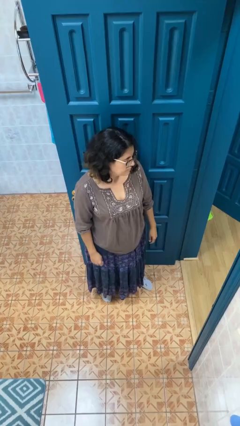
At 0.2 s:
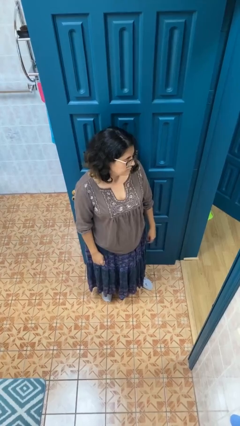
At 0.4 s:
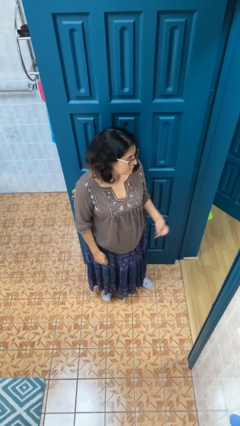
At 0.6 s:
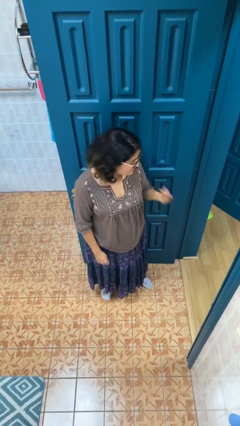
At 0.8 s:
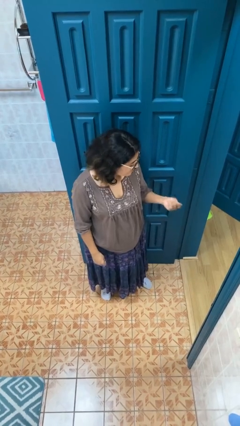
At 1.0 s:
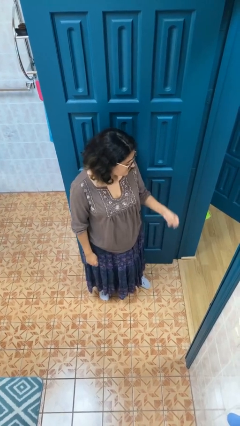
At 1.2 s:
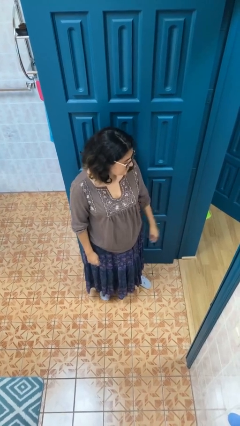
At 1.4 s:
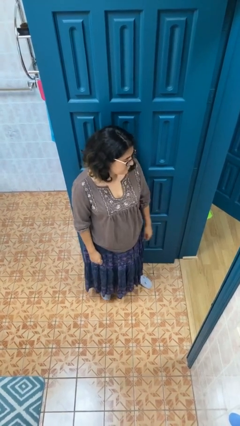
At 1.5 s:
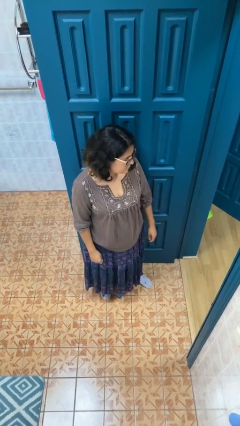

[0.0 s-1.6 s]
person snaps fingers

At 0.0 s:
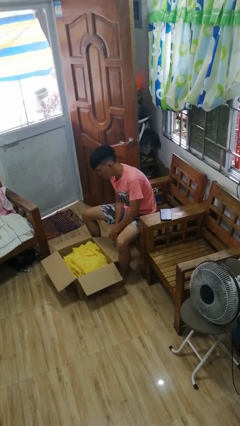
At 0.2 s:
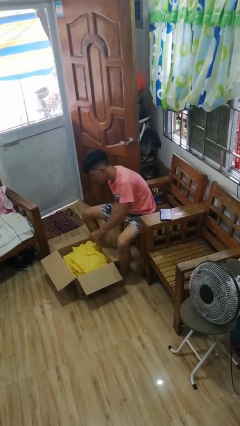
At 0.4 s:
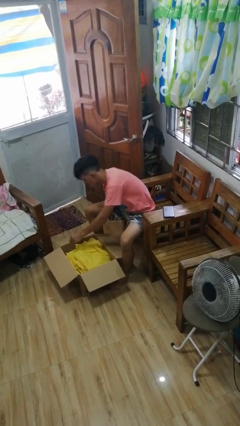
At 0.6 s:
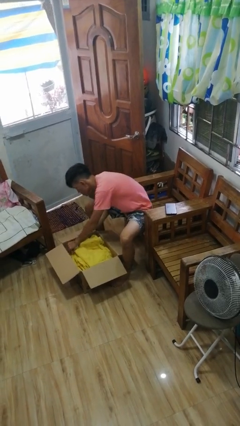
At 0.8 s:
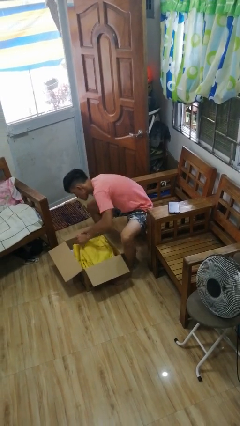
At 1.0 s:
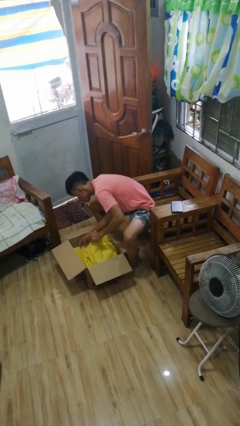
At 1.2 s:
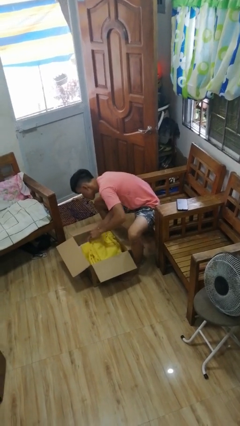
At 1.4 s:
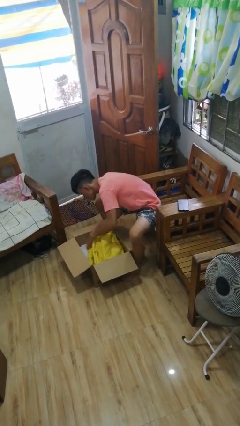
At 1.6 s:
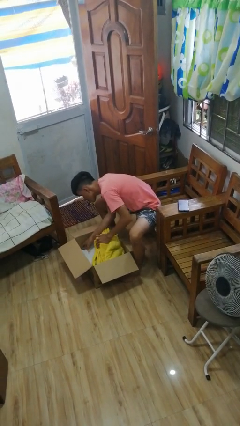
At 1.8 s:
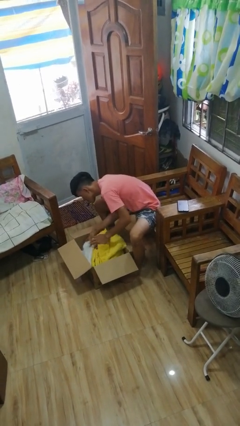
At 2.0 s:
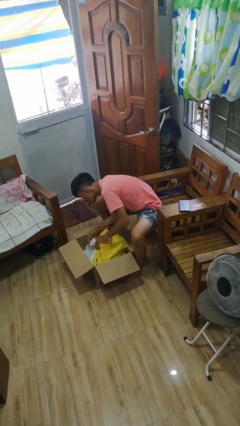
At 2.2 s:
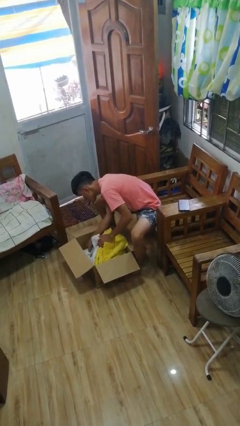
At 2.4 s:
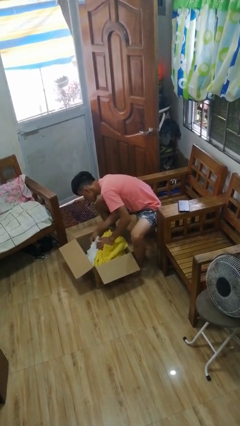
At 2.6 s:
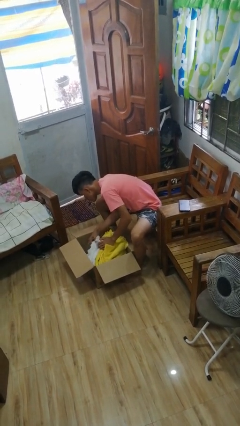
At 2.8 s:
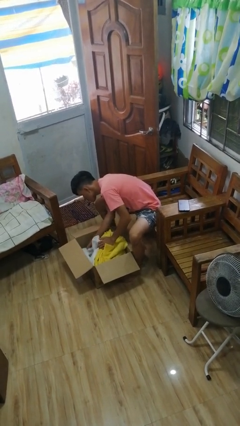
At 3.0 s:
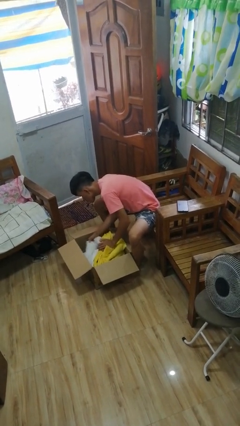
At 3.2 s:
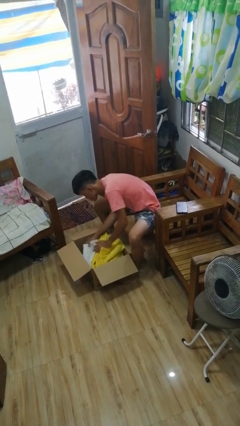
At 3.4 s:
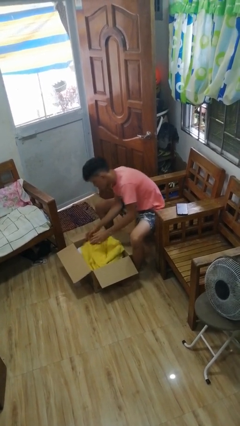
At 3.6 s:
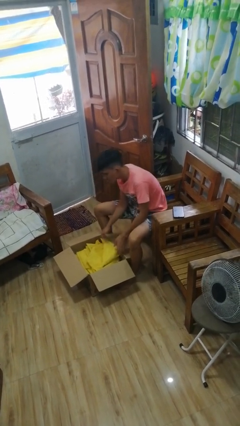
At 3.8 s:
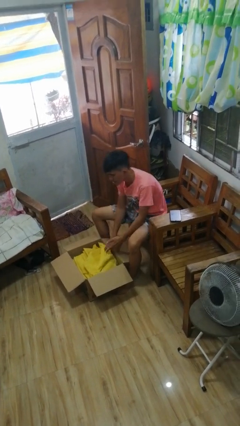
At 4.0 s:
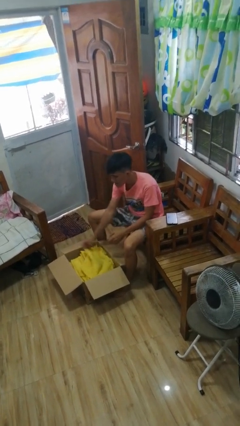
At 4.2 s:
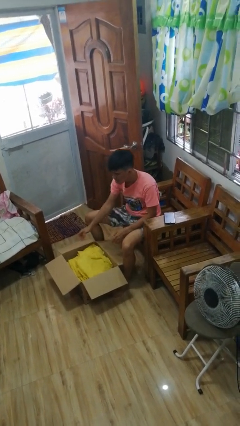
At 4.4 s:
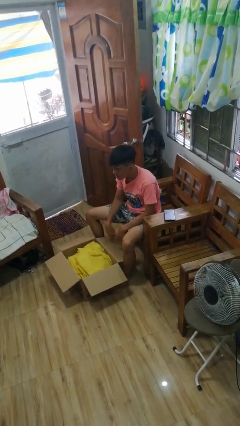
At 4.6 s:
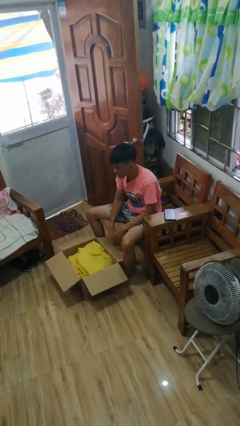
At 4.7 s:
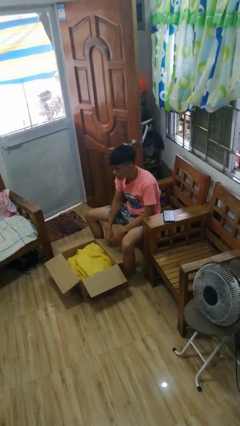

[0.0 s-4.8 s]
person searches in box

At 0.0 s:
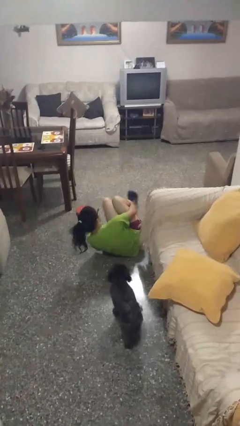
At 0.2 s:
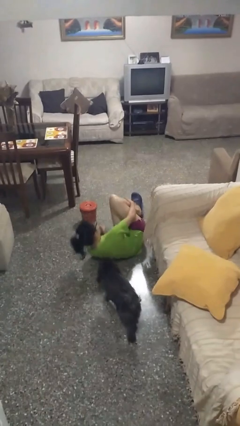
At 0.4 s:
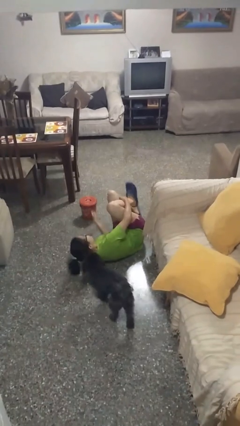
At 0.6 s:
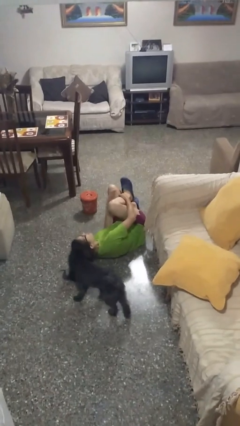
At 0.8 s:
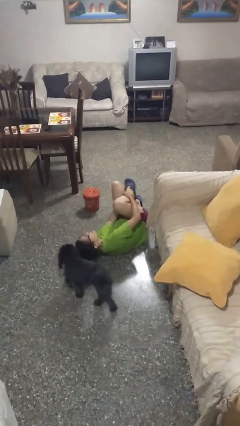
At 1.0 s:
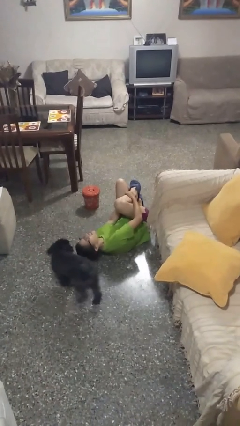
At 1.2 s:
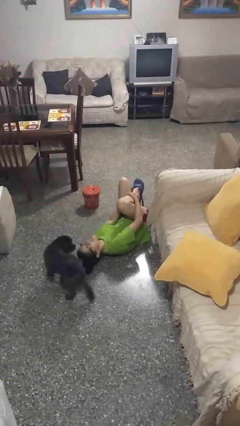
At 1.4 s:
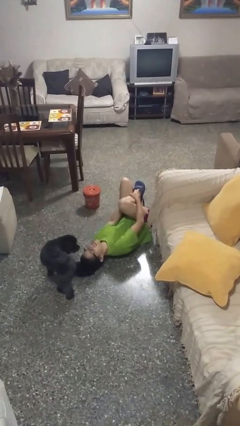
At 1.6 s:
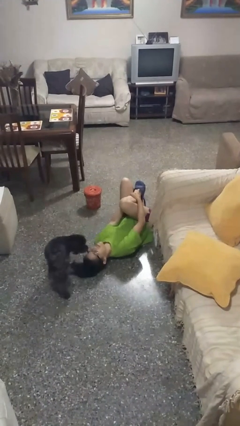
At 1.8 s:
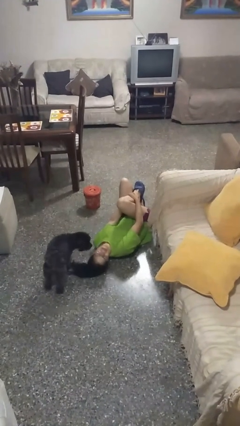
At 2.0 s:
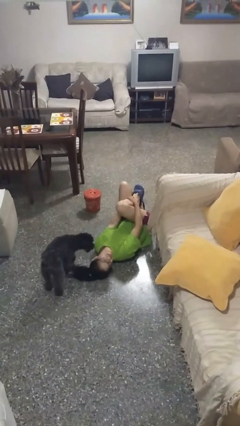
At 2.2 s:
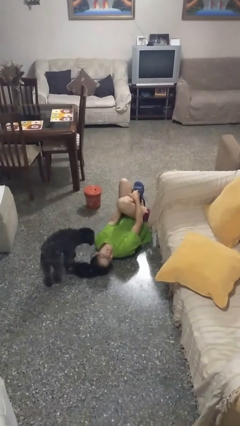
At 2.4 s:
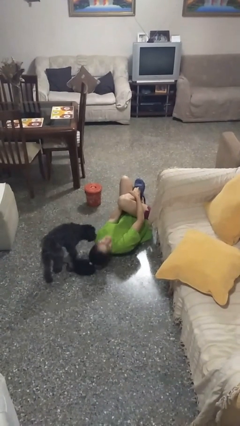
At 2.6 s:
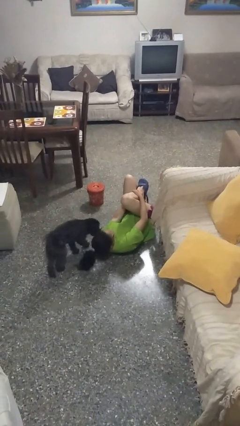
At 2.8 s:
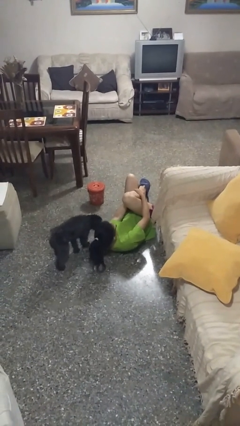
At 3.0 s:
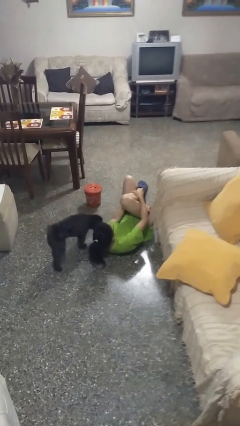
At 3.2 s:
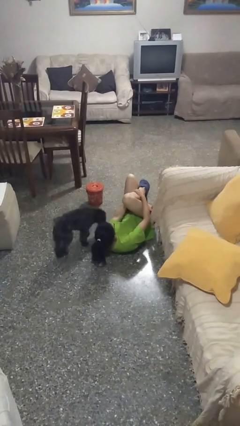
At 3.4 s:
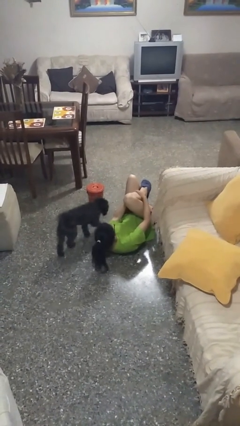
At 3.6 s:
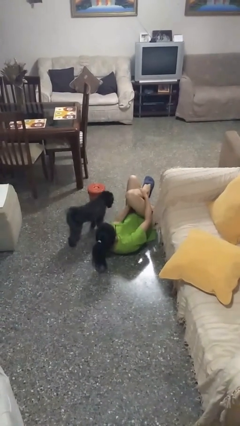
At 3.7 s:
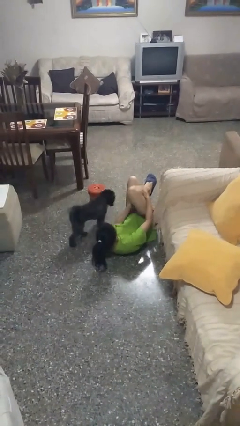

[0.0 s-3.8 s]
person lies down on floor

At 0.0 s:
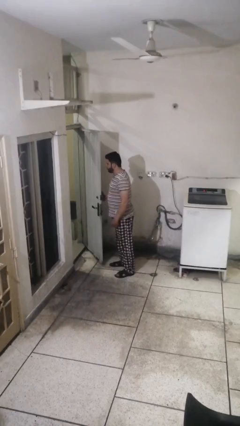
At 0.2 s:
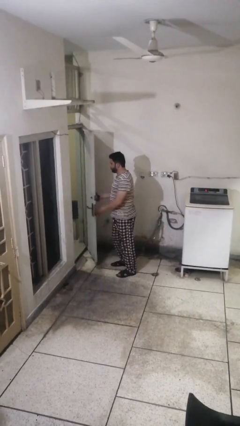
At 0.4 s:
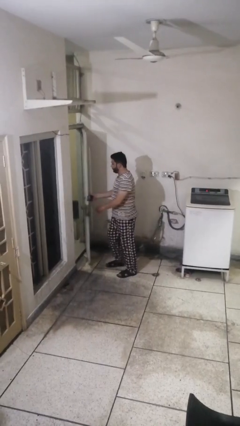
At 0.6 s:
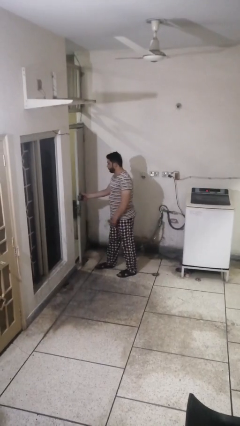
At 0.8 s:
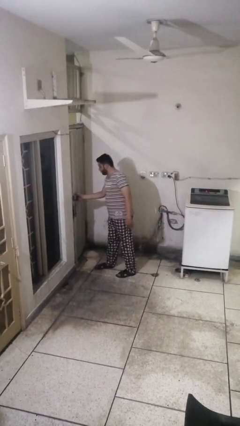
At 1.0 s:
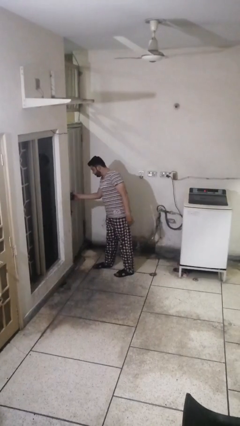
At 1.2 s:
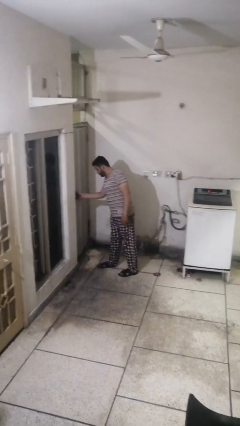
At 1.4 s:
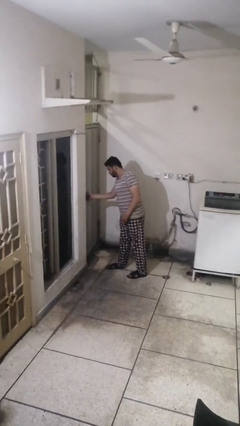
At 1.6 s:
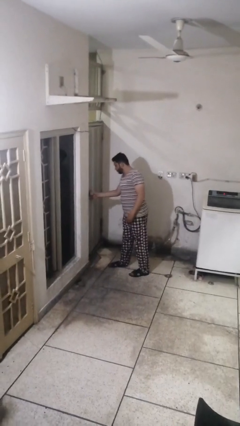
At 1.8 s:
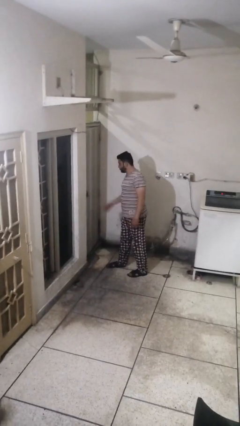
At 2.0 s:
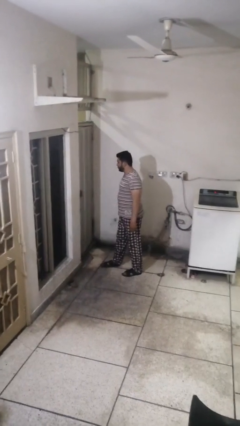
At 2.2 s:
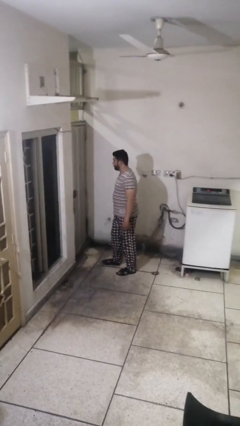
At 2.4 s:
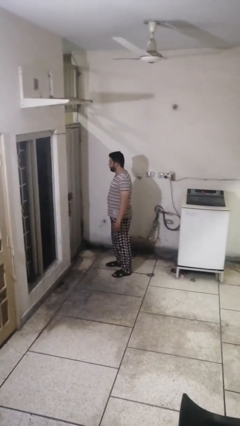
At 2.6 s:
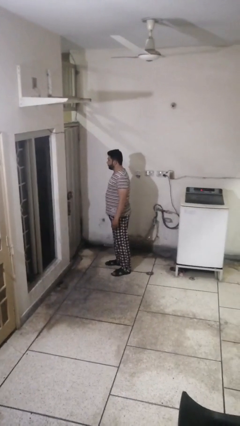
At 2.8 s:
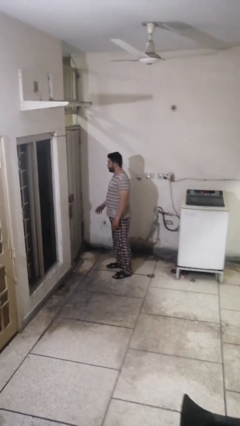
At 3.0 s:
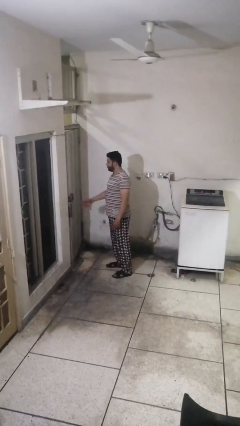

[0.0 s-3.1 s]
person closes facility door

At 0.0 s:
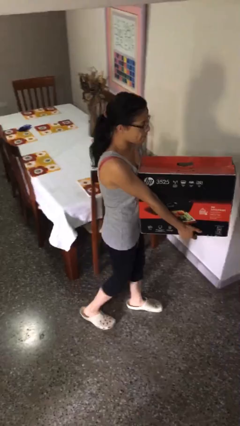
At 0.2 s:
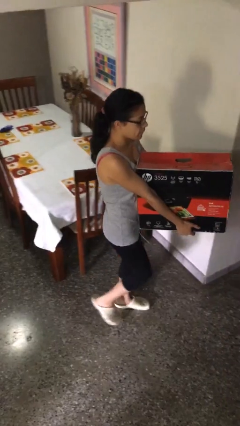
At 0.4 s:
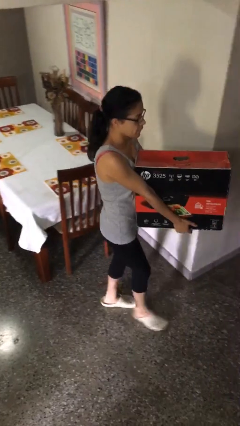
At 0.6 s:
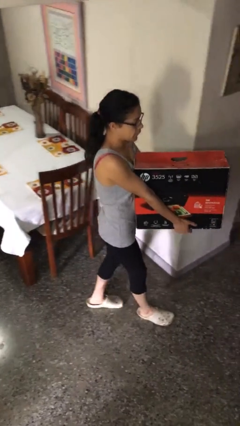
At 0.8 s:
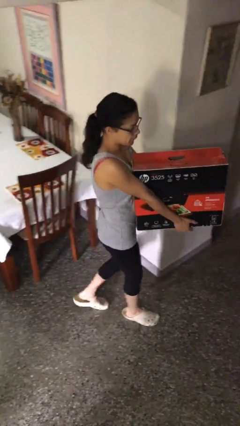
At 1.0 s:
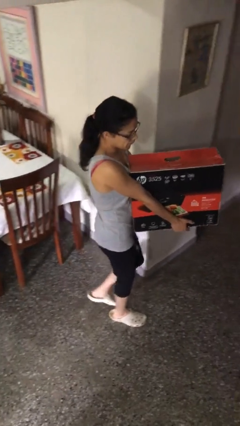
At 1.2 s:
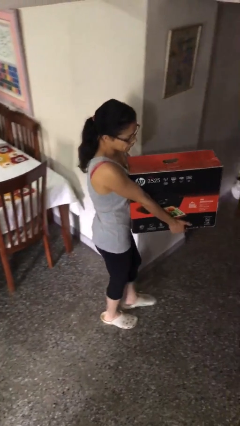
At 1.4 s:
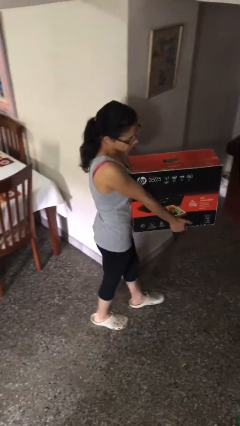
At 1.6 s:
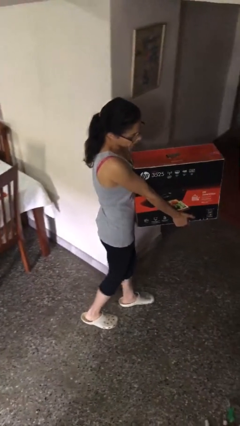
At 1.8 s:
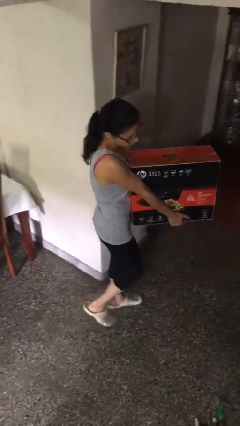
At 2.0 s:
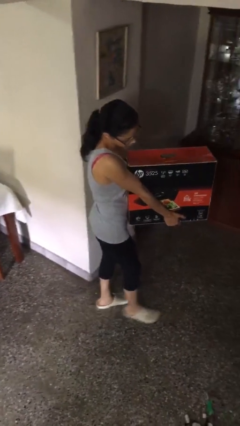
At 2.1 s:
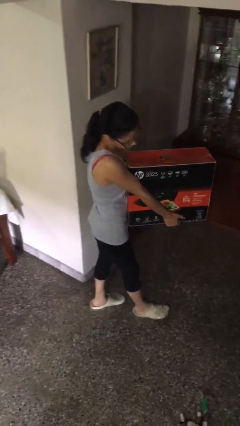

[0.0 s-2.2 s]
person carries heavy object

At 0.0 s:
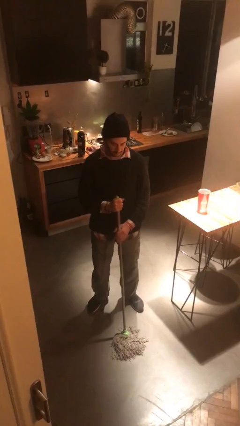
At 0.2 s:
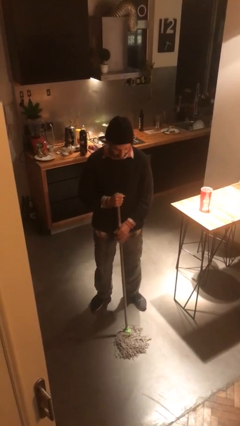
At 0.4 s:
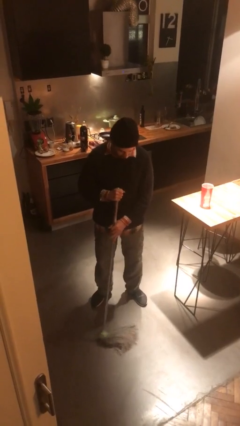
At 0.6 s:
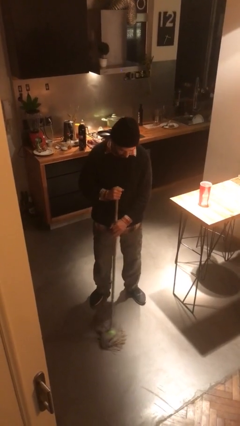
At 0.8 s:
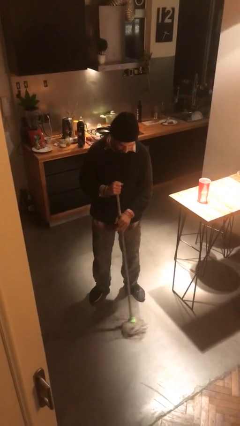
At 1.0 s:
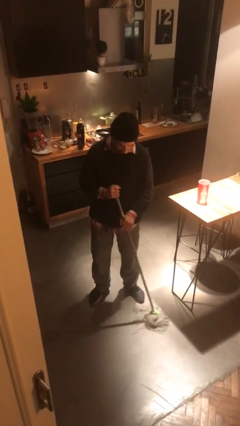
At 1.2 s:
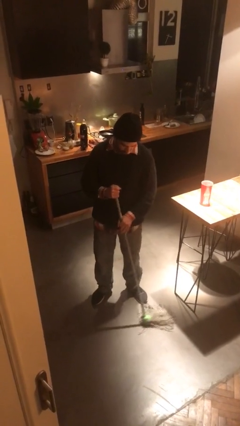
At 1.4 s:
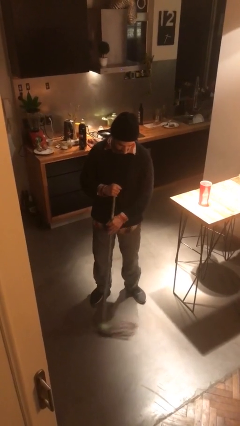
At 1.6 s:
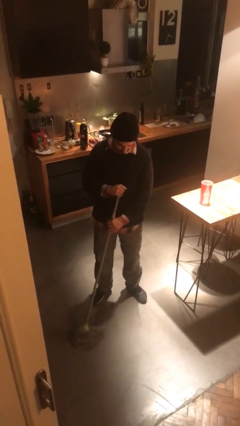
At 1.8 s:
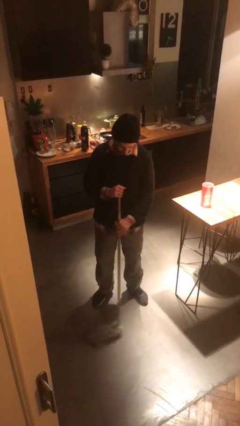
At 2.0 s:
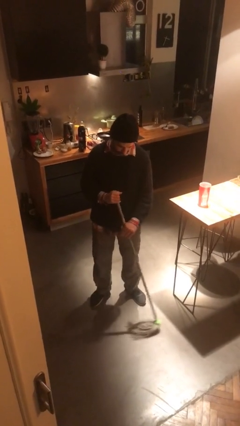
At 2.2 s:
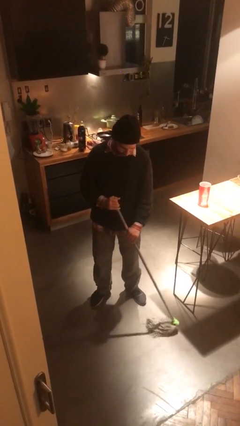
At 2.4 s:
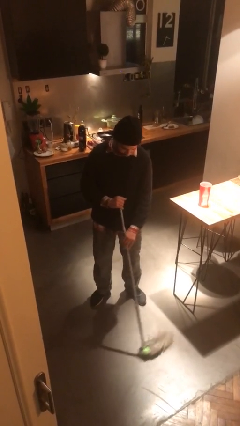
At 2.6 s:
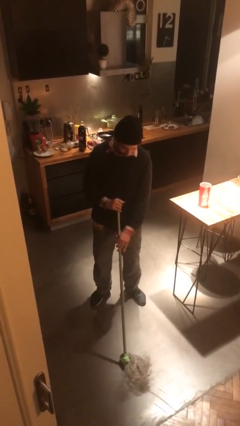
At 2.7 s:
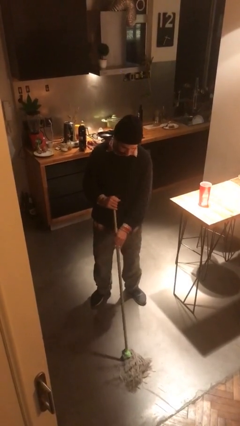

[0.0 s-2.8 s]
person mops
